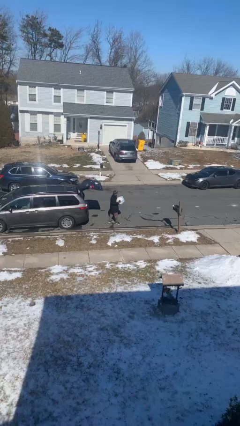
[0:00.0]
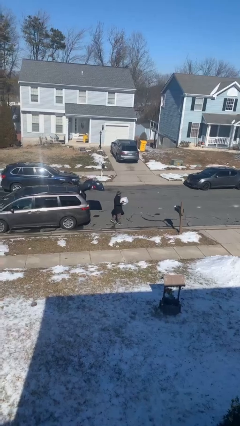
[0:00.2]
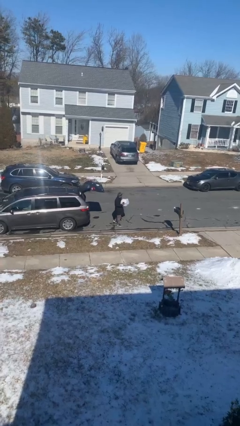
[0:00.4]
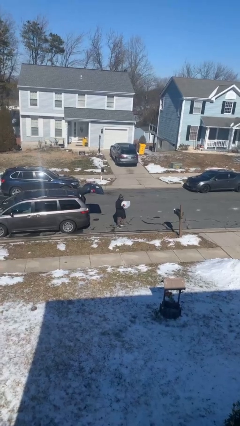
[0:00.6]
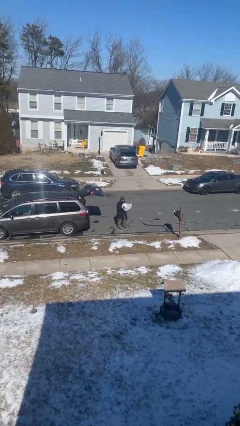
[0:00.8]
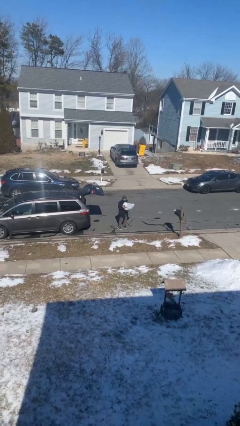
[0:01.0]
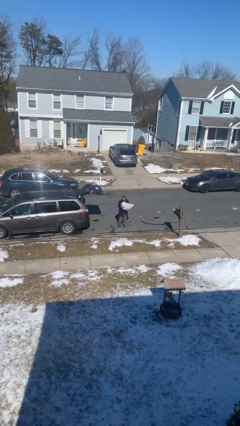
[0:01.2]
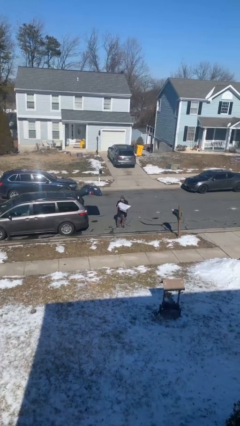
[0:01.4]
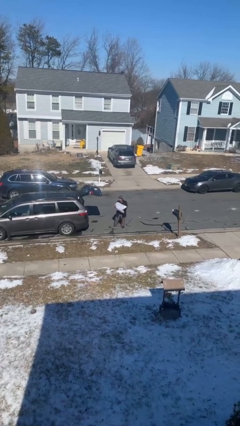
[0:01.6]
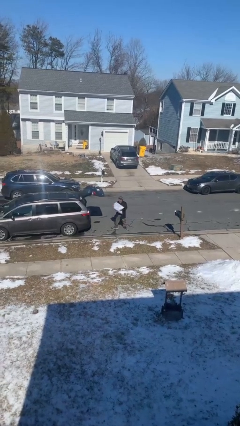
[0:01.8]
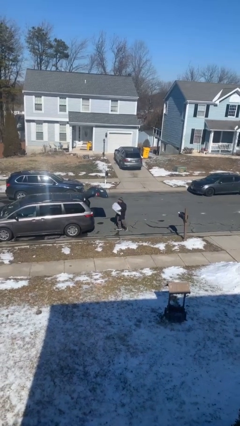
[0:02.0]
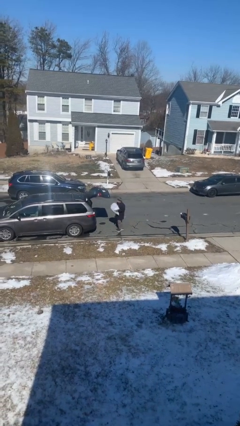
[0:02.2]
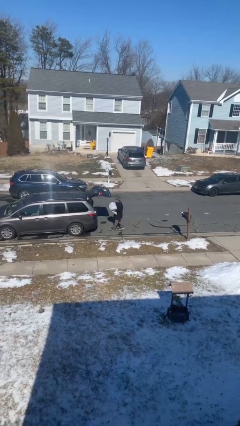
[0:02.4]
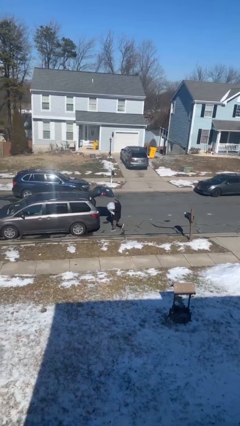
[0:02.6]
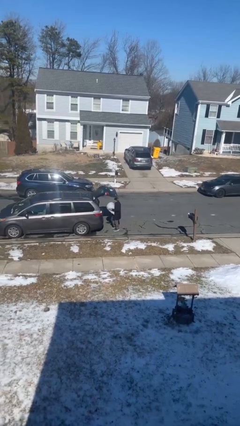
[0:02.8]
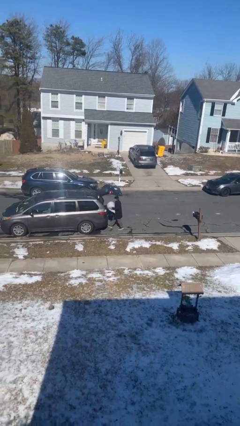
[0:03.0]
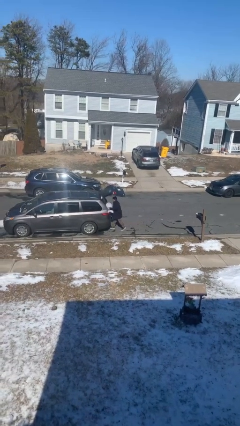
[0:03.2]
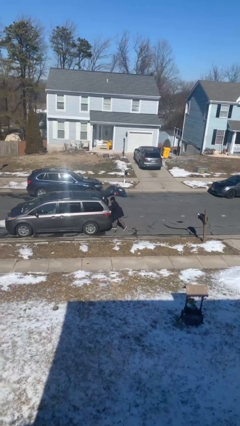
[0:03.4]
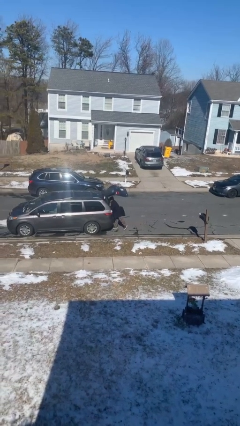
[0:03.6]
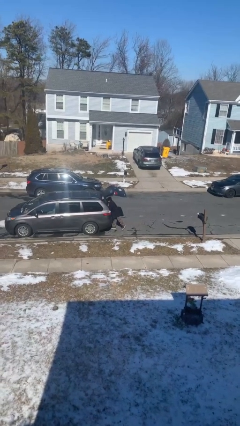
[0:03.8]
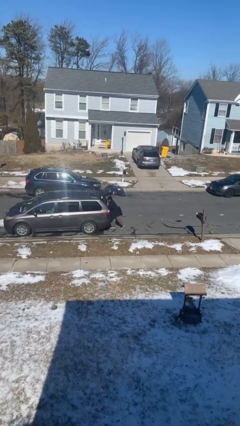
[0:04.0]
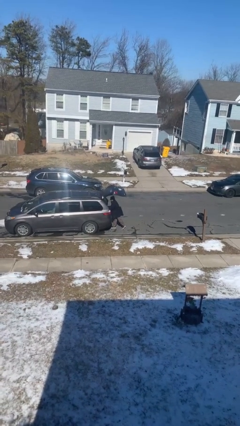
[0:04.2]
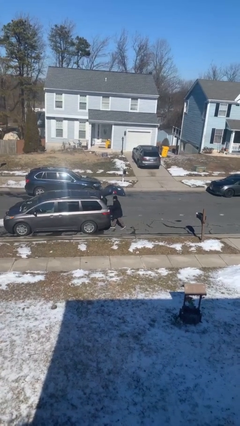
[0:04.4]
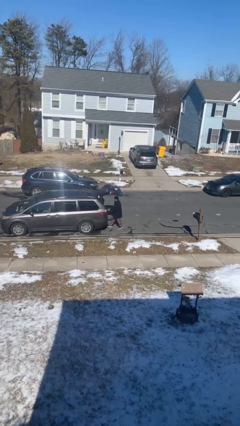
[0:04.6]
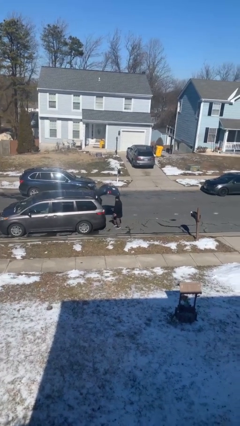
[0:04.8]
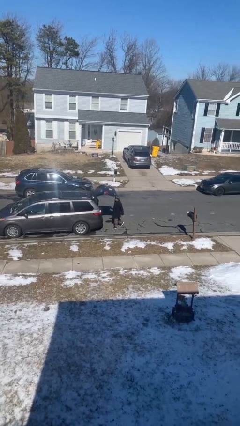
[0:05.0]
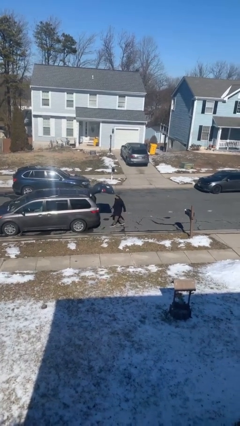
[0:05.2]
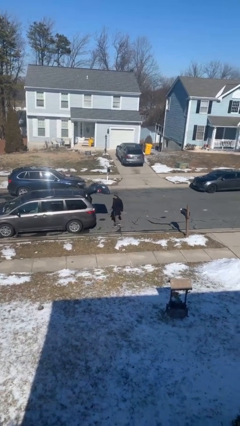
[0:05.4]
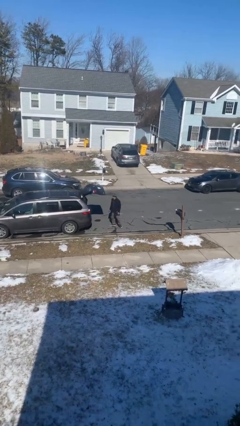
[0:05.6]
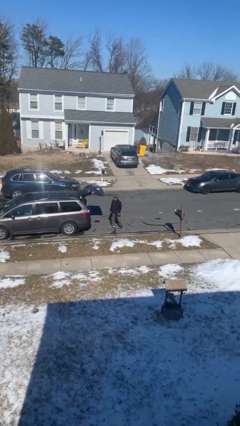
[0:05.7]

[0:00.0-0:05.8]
person loads car

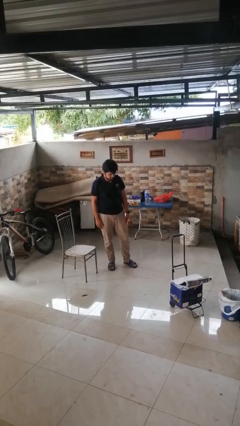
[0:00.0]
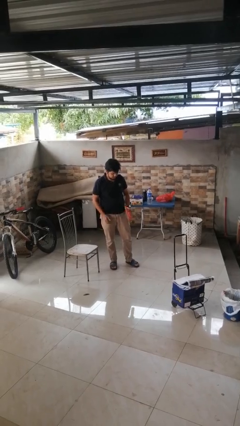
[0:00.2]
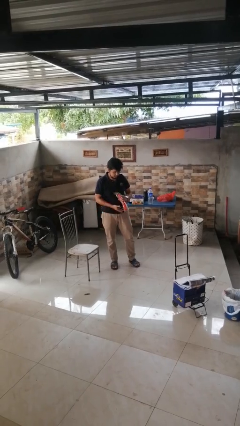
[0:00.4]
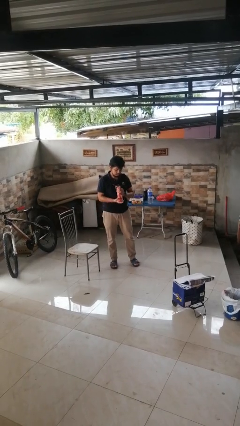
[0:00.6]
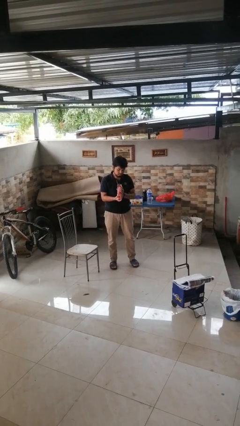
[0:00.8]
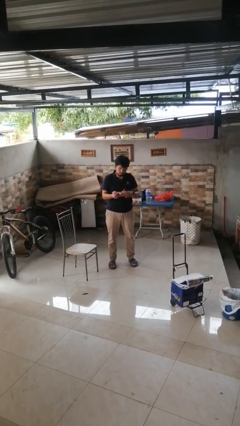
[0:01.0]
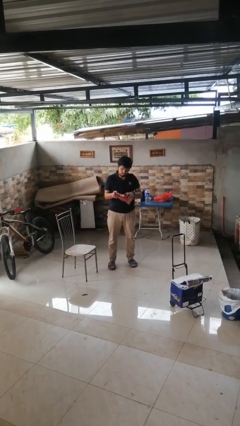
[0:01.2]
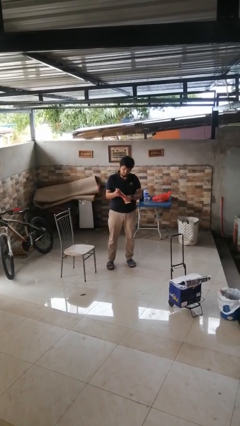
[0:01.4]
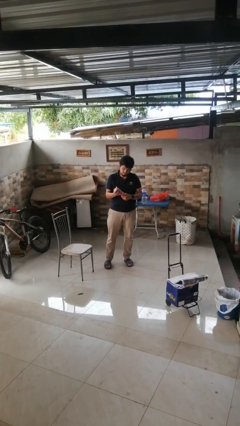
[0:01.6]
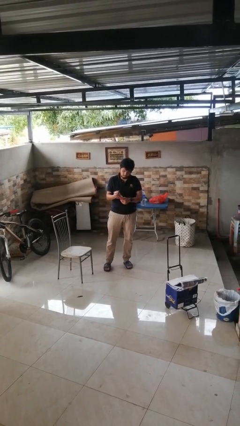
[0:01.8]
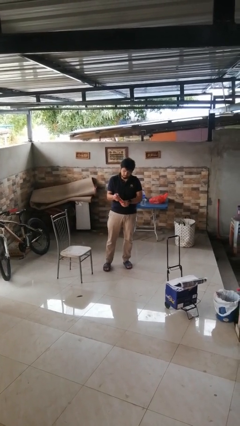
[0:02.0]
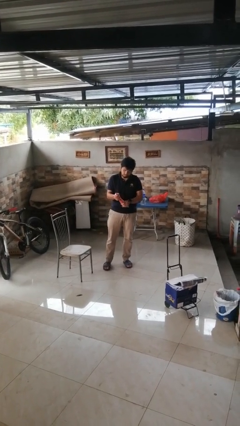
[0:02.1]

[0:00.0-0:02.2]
person squeezes object

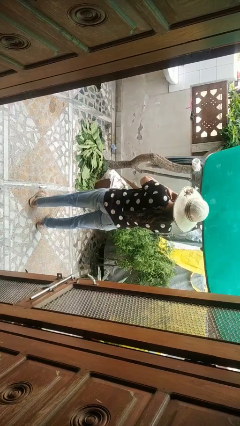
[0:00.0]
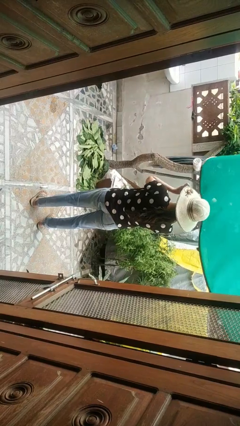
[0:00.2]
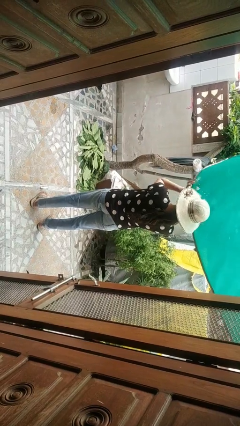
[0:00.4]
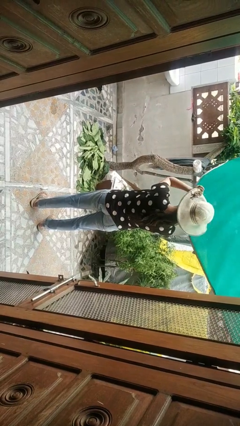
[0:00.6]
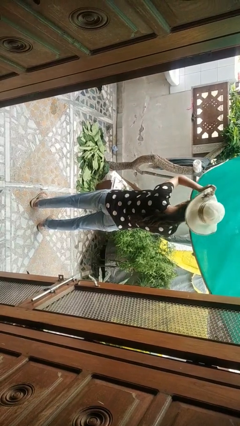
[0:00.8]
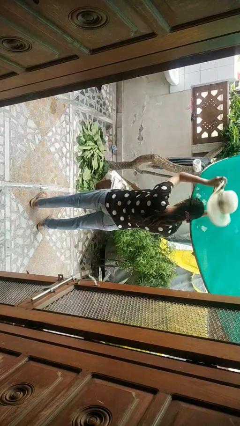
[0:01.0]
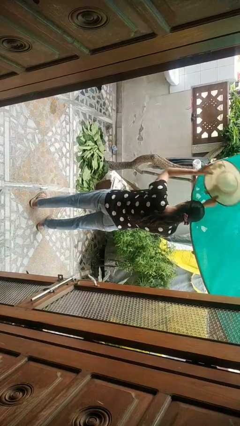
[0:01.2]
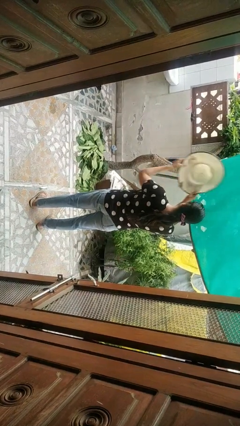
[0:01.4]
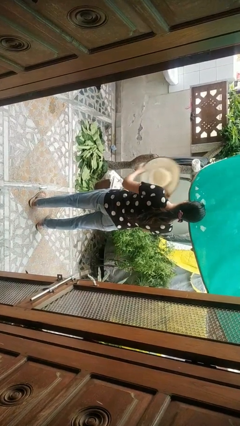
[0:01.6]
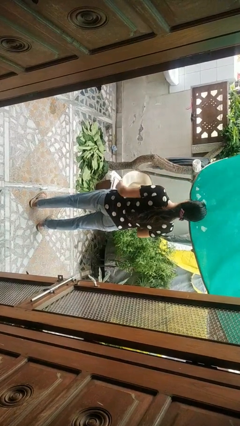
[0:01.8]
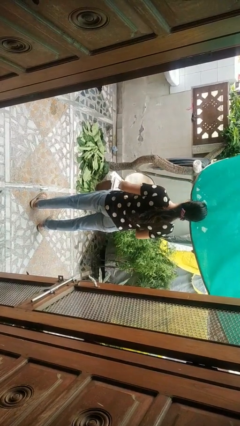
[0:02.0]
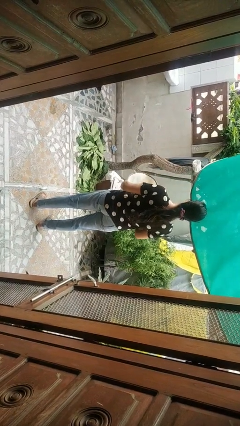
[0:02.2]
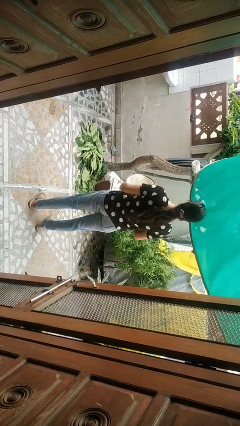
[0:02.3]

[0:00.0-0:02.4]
person takes off hat

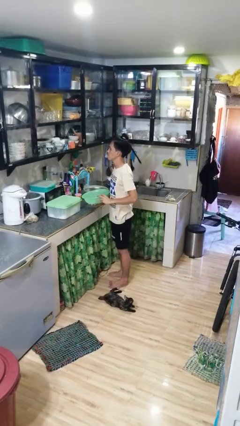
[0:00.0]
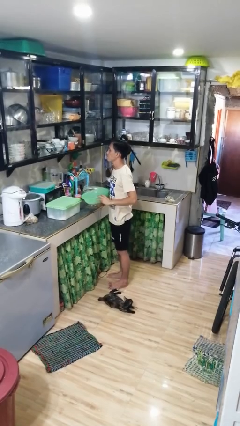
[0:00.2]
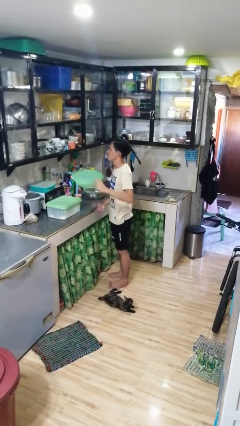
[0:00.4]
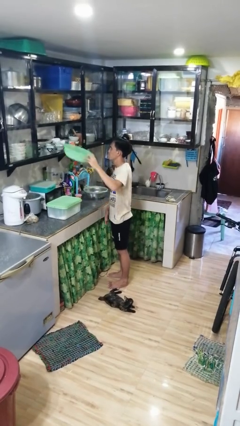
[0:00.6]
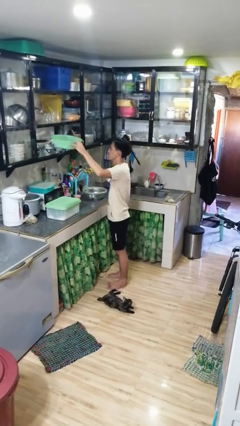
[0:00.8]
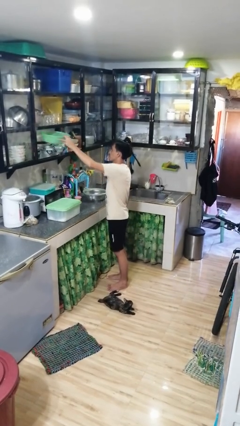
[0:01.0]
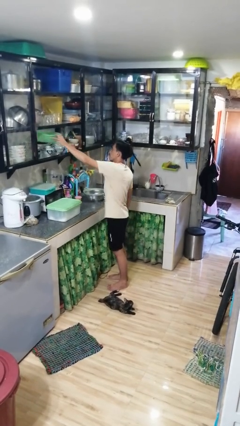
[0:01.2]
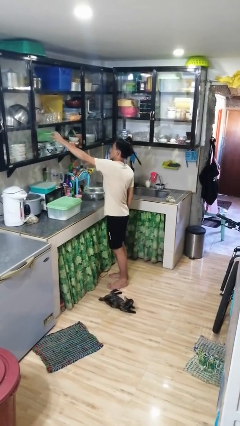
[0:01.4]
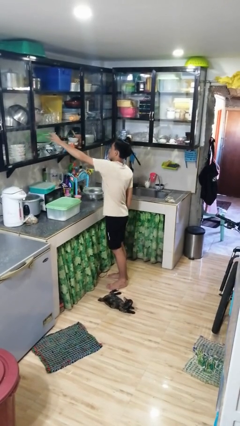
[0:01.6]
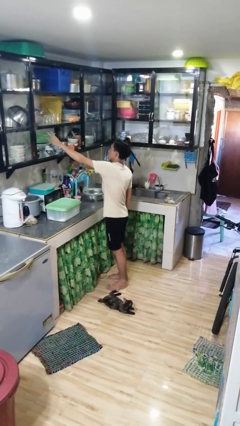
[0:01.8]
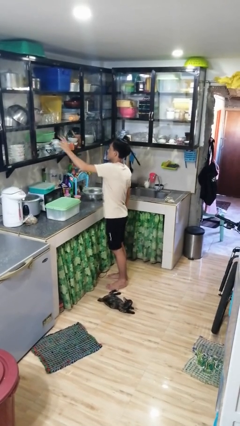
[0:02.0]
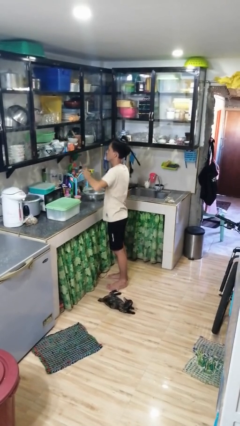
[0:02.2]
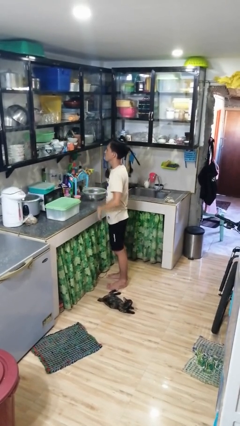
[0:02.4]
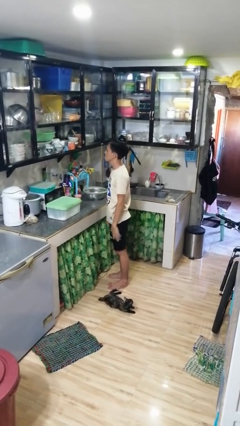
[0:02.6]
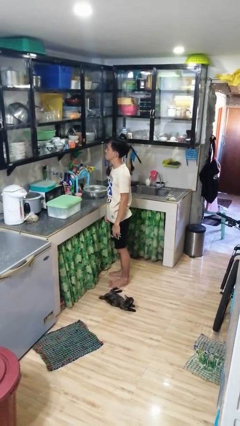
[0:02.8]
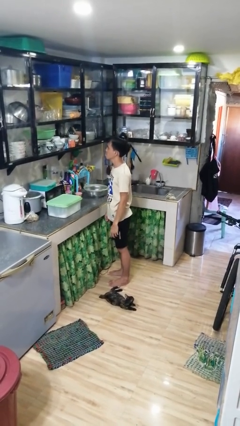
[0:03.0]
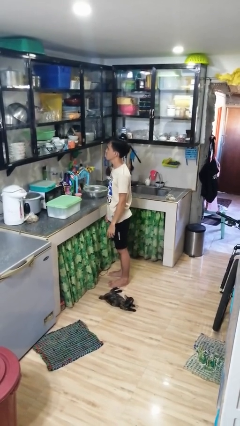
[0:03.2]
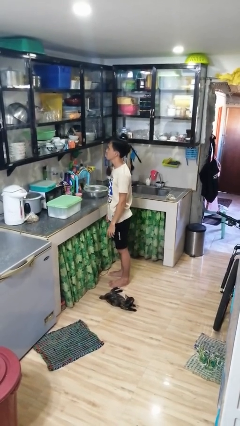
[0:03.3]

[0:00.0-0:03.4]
person puts down object into cabinet

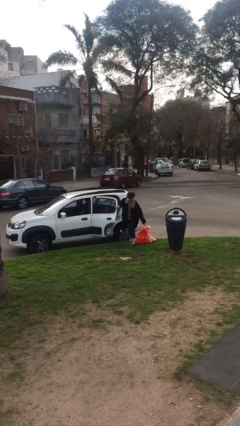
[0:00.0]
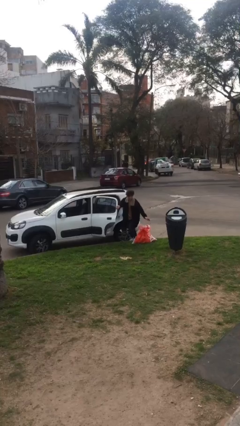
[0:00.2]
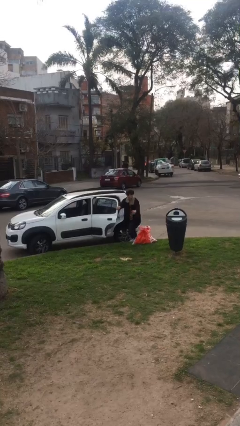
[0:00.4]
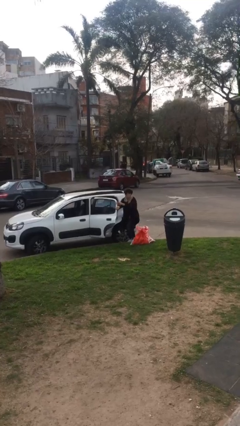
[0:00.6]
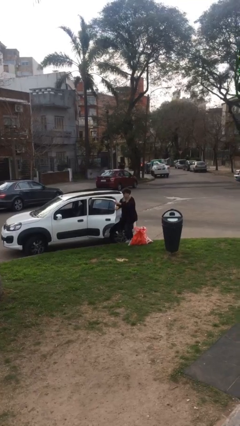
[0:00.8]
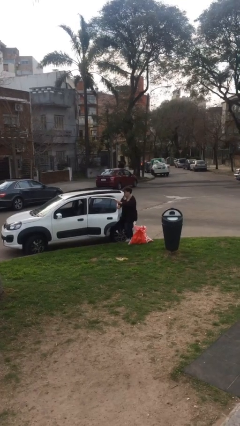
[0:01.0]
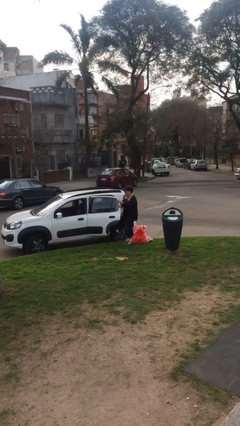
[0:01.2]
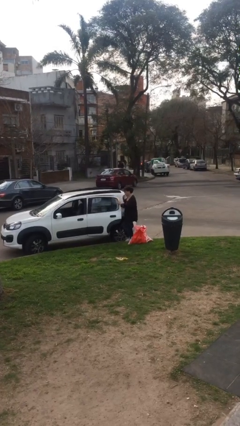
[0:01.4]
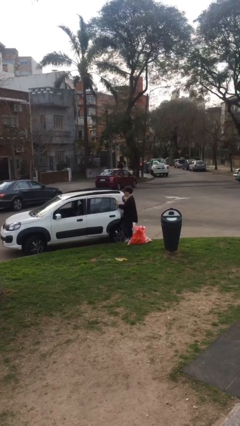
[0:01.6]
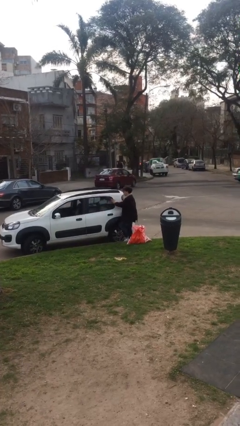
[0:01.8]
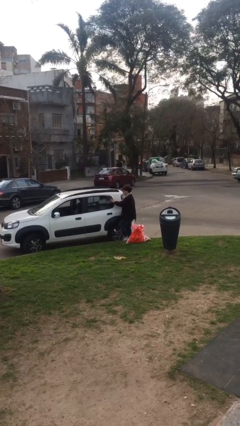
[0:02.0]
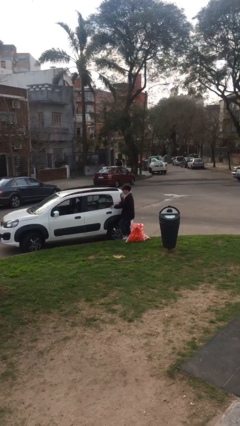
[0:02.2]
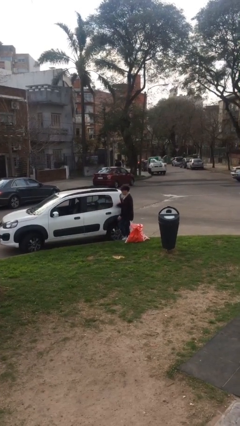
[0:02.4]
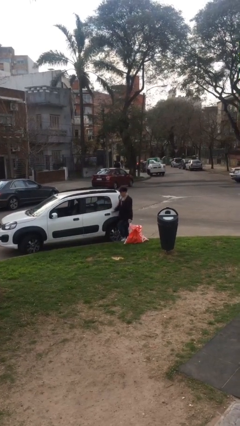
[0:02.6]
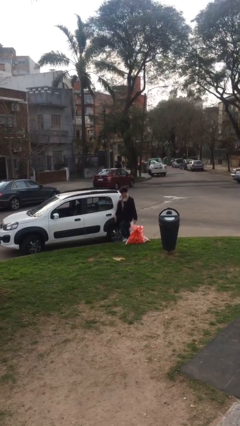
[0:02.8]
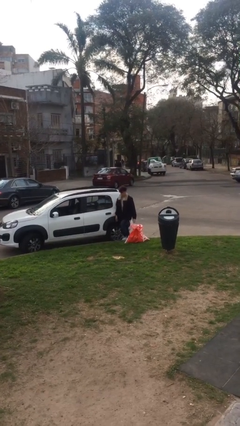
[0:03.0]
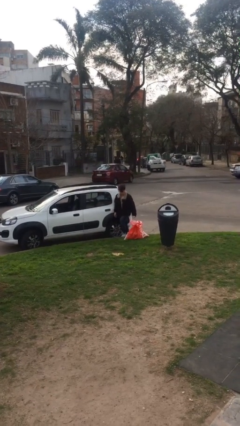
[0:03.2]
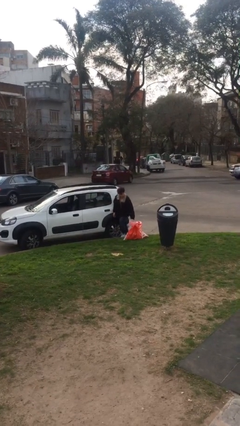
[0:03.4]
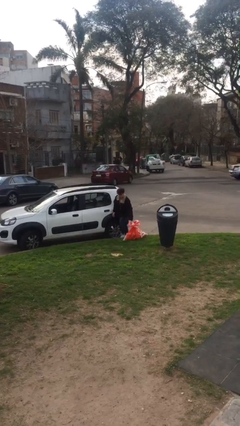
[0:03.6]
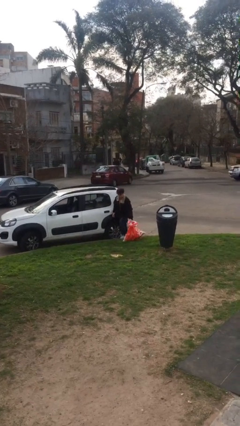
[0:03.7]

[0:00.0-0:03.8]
person closes car door
